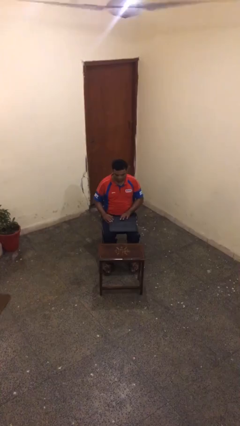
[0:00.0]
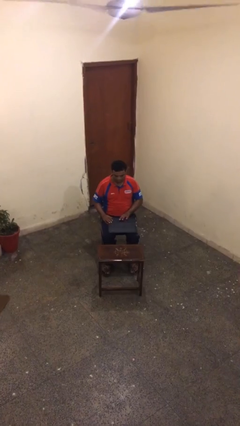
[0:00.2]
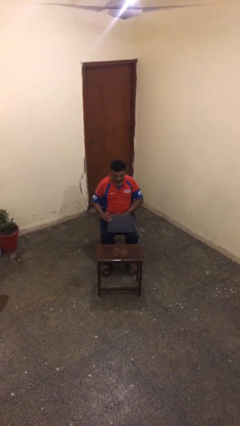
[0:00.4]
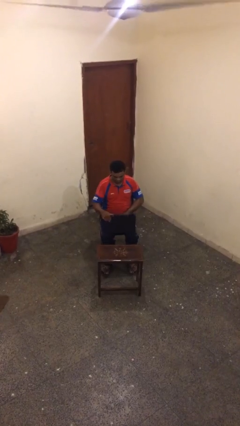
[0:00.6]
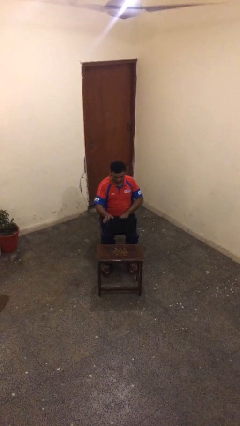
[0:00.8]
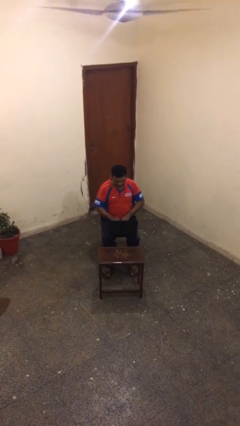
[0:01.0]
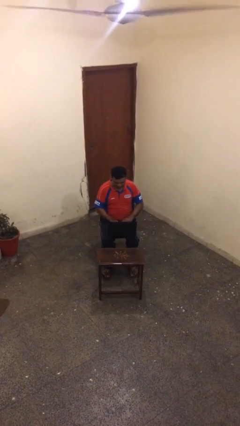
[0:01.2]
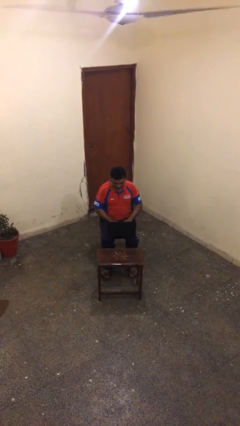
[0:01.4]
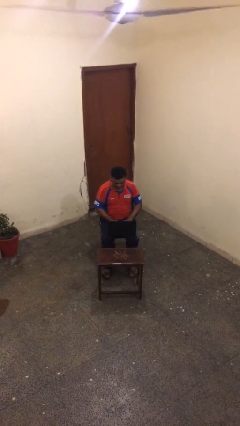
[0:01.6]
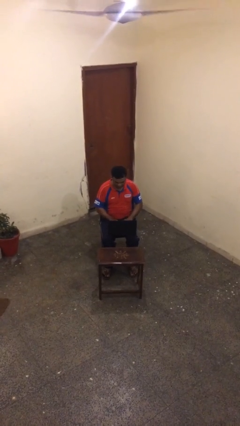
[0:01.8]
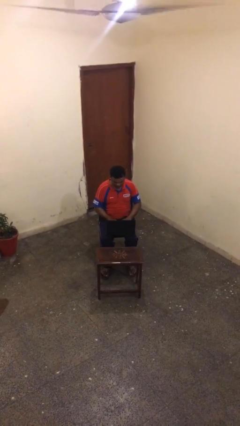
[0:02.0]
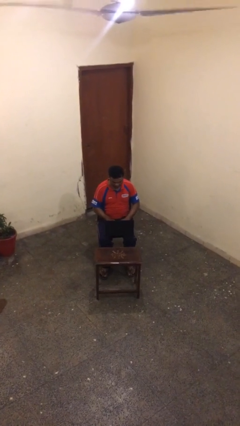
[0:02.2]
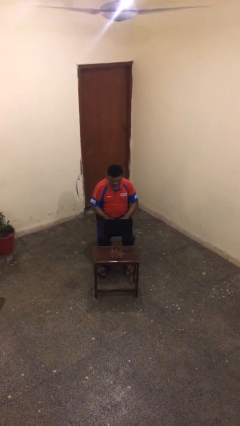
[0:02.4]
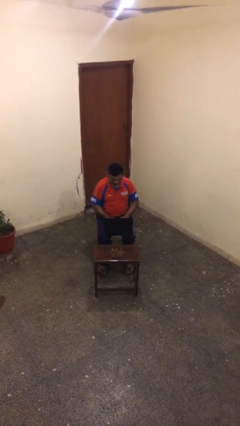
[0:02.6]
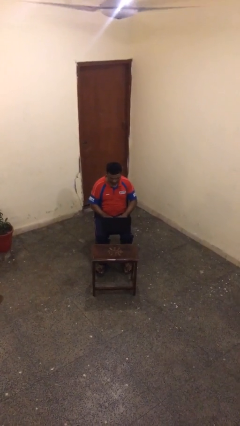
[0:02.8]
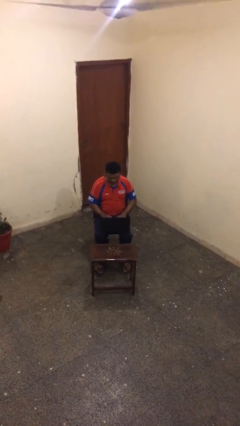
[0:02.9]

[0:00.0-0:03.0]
person interacts with laptop

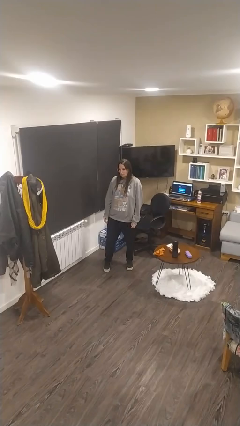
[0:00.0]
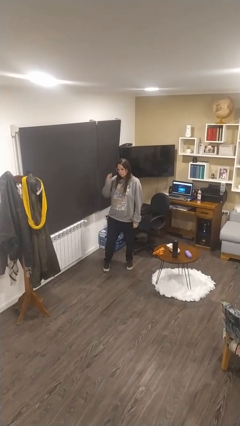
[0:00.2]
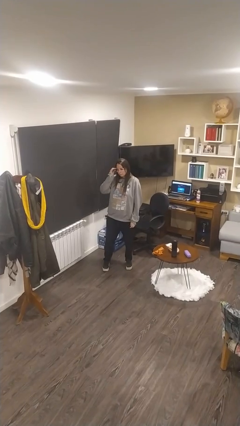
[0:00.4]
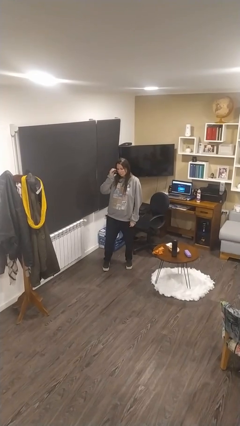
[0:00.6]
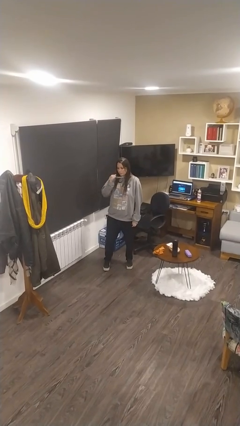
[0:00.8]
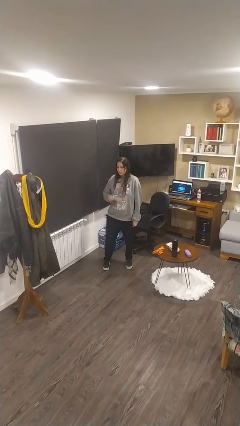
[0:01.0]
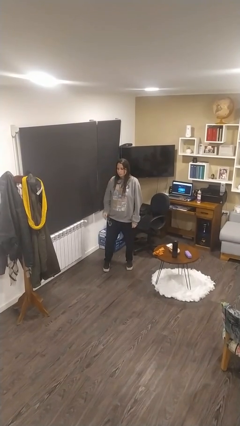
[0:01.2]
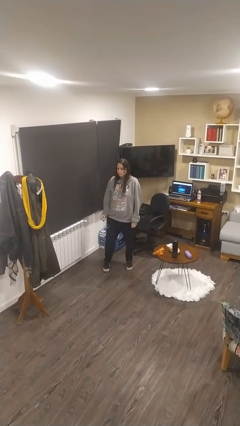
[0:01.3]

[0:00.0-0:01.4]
person takes off glasses

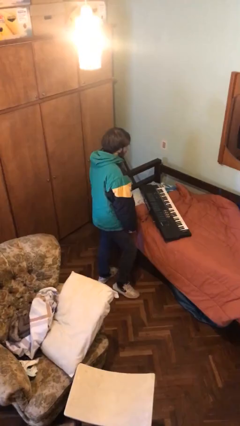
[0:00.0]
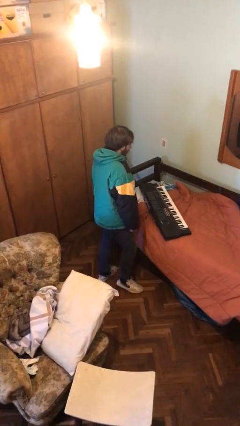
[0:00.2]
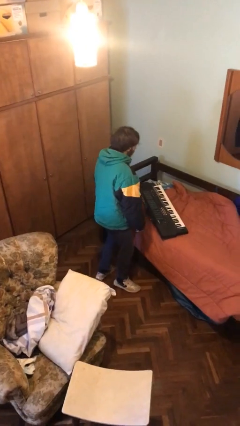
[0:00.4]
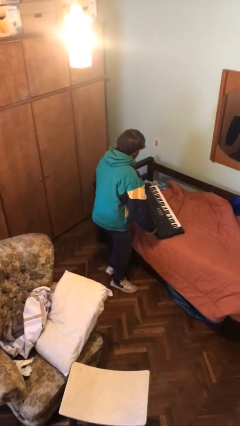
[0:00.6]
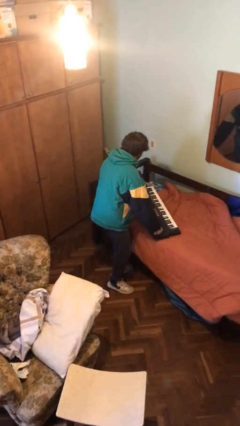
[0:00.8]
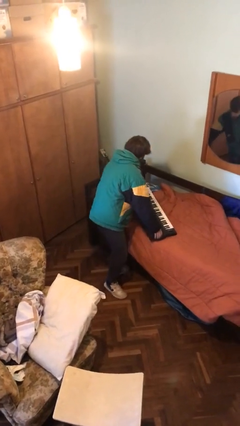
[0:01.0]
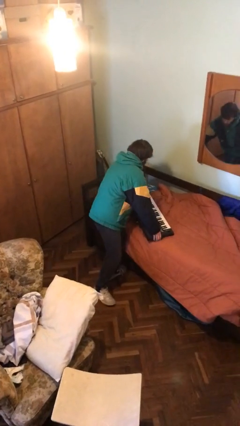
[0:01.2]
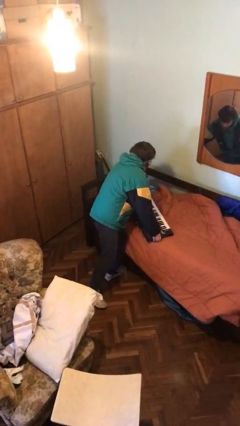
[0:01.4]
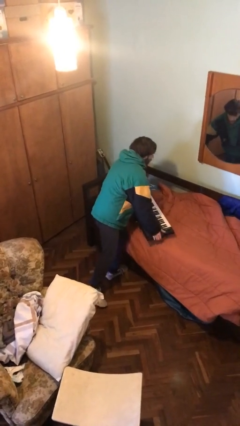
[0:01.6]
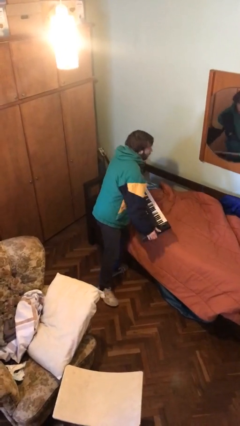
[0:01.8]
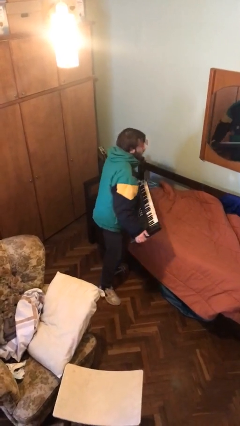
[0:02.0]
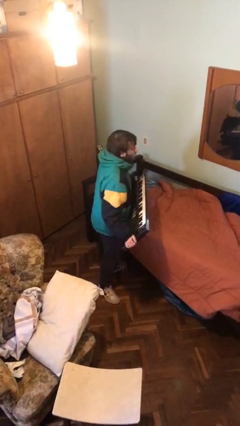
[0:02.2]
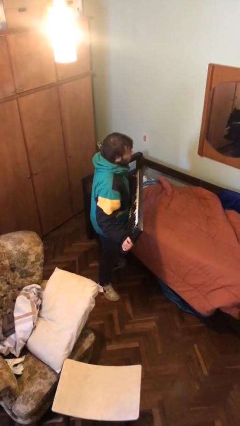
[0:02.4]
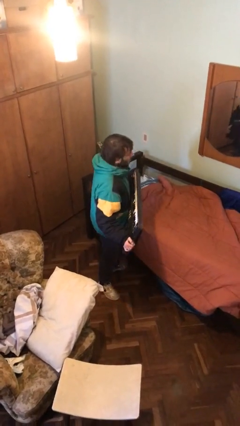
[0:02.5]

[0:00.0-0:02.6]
person picks up object from bed

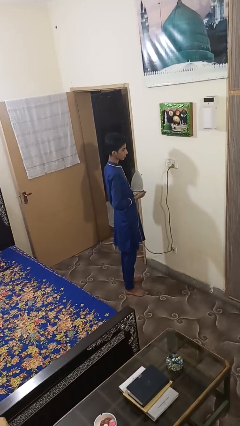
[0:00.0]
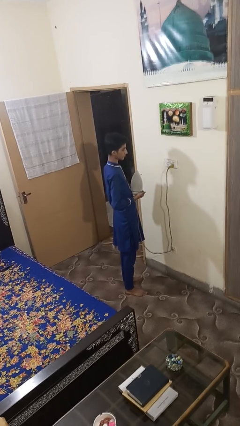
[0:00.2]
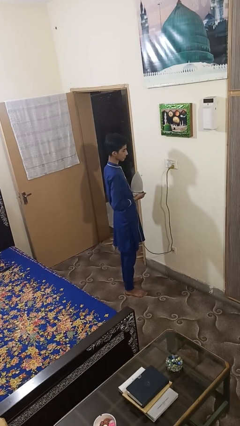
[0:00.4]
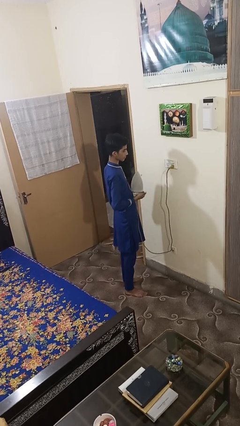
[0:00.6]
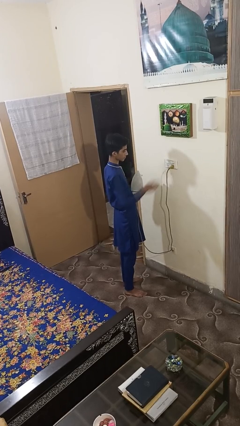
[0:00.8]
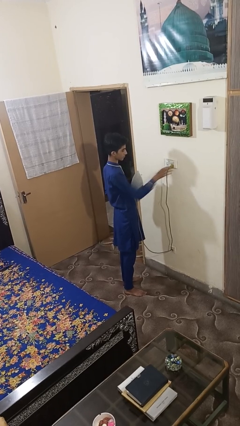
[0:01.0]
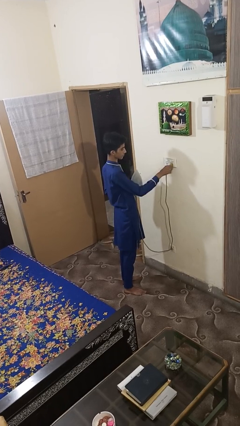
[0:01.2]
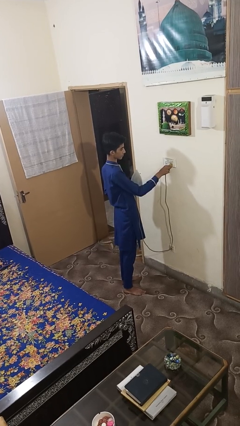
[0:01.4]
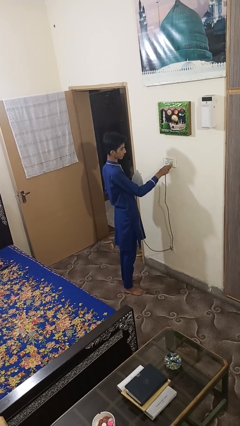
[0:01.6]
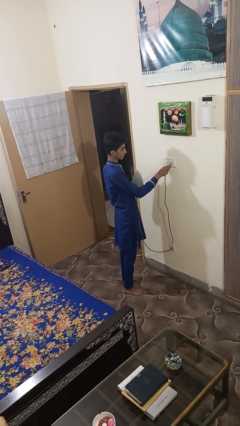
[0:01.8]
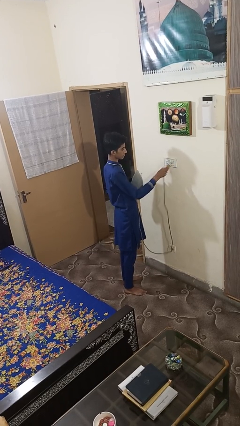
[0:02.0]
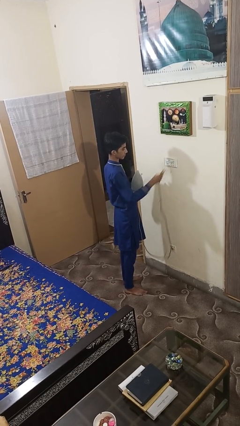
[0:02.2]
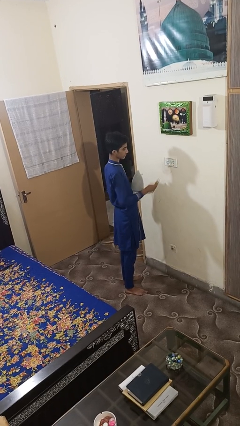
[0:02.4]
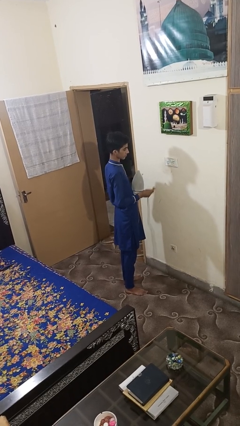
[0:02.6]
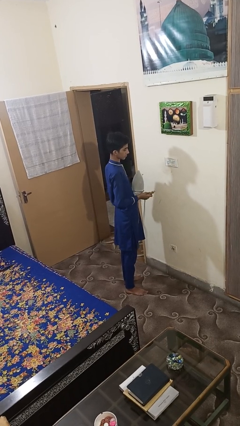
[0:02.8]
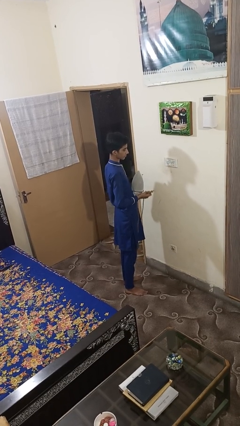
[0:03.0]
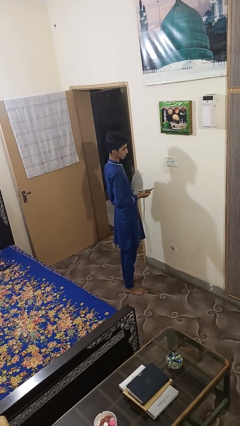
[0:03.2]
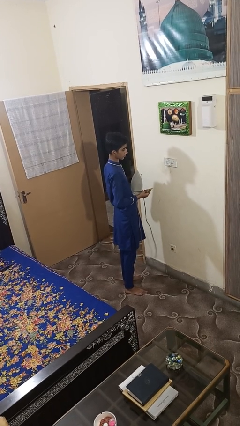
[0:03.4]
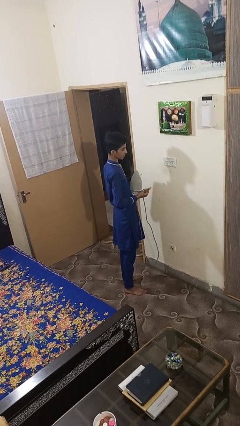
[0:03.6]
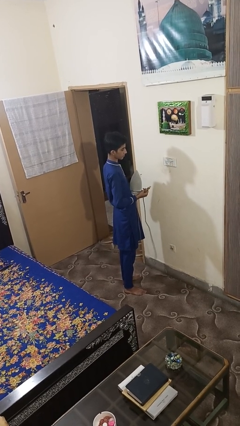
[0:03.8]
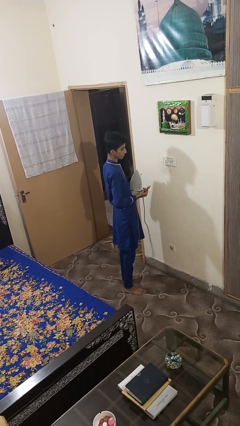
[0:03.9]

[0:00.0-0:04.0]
person unplugs from electrical socket

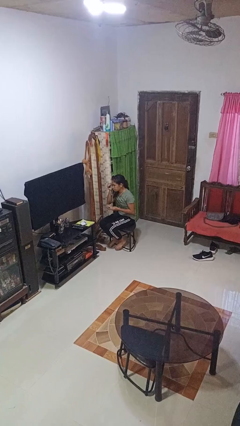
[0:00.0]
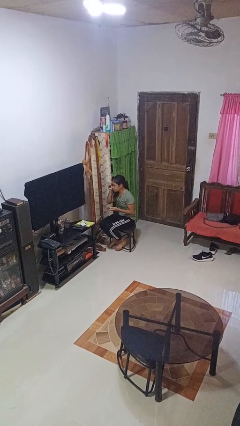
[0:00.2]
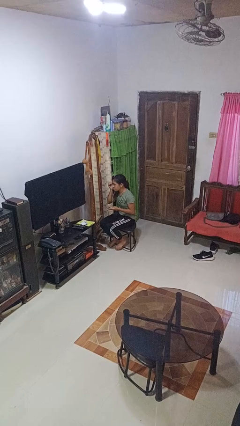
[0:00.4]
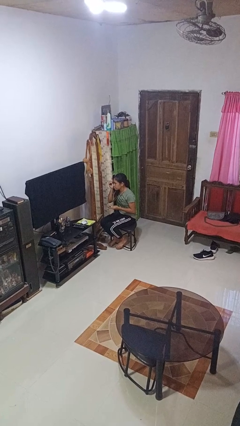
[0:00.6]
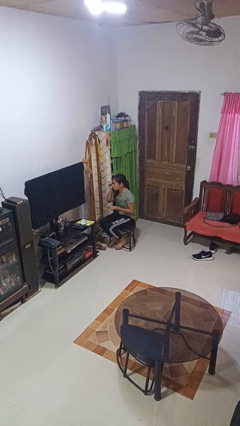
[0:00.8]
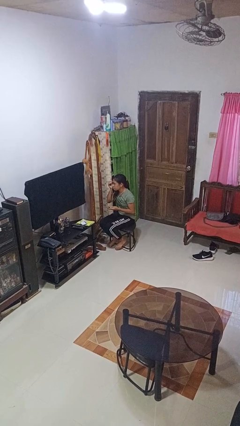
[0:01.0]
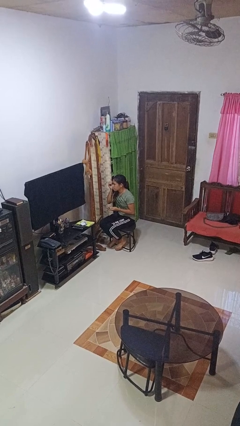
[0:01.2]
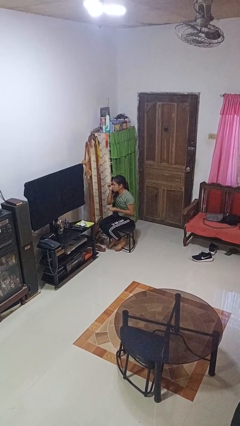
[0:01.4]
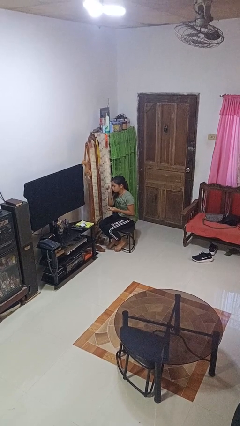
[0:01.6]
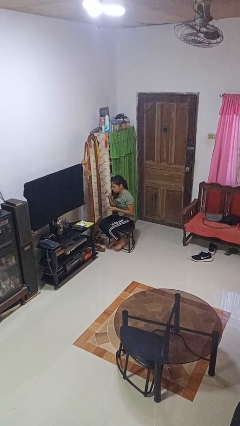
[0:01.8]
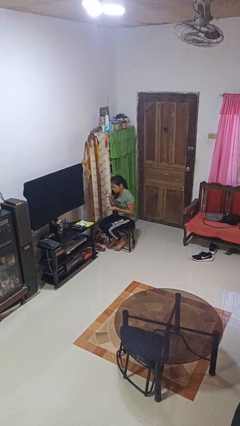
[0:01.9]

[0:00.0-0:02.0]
person applies eye makeup

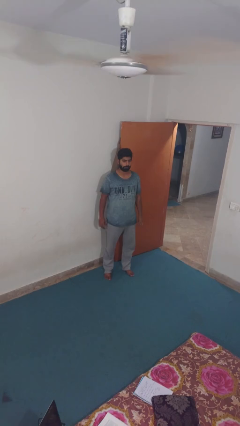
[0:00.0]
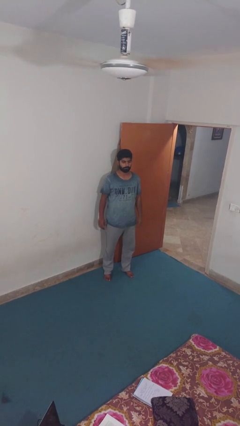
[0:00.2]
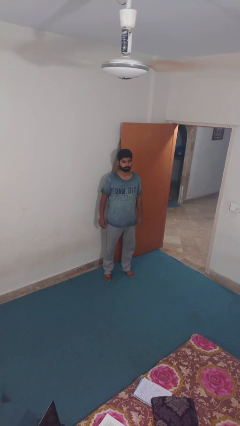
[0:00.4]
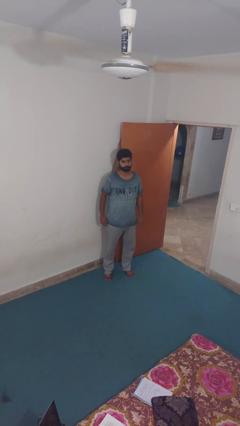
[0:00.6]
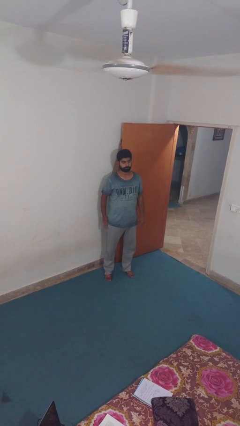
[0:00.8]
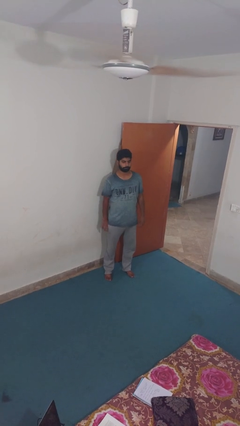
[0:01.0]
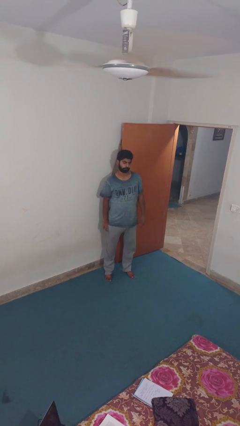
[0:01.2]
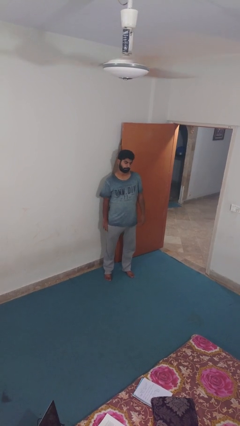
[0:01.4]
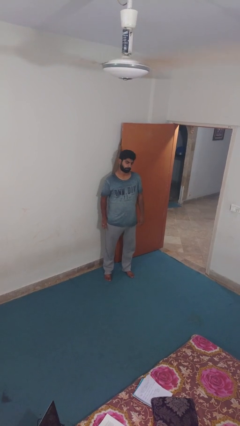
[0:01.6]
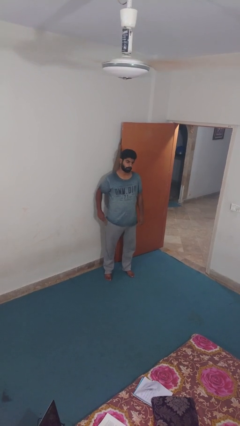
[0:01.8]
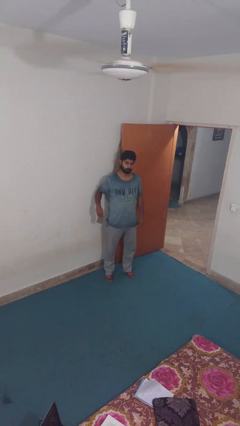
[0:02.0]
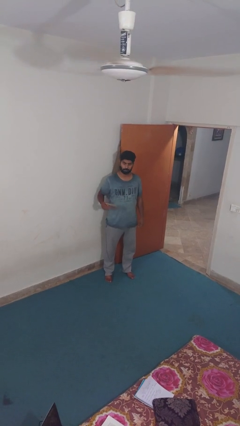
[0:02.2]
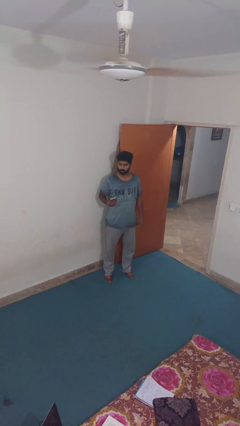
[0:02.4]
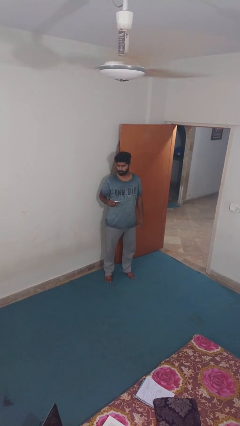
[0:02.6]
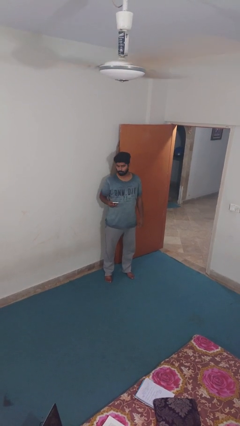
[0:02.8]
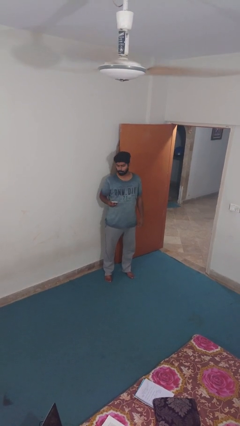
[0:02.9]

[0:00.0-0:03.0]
person takes phone from pocket

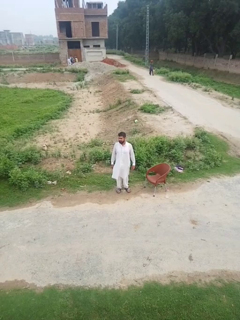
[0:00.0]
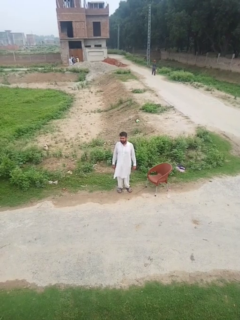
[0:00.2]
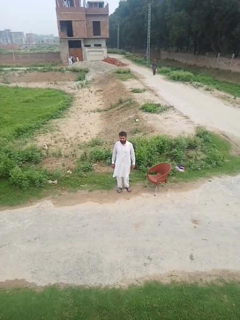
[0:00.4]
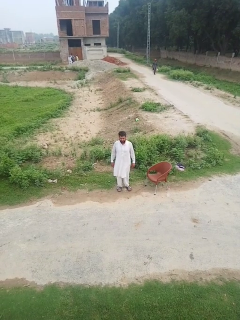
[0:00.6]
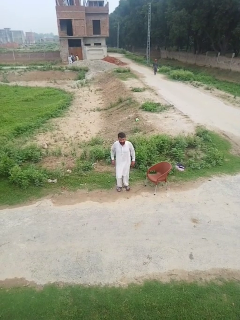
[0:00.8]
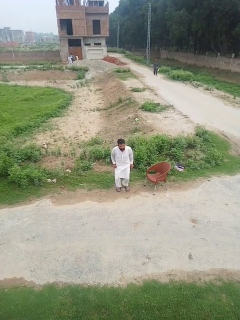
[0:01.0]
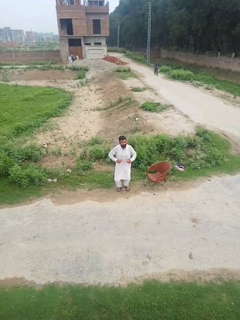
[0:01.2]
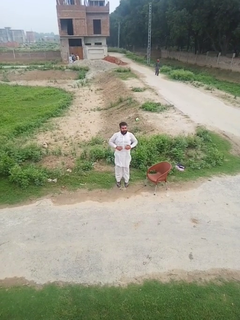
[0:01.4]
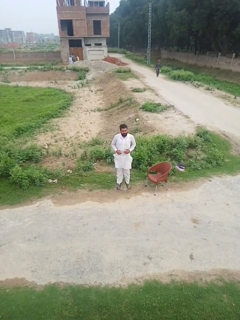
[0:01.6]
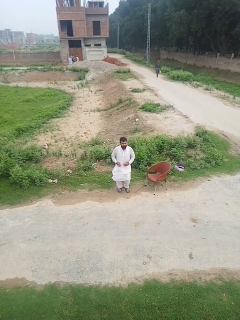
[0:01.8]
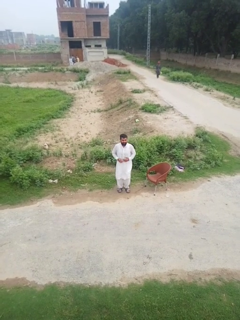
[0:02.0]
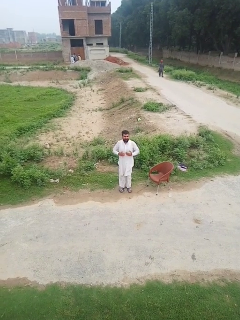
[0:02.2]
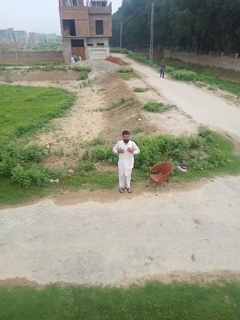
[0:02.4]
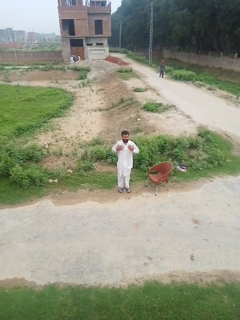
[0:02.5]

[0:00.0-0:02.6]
person jumps
